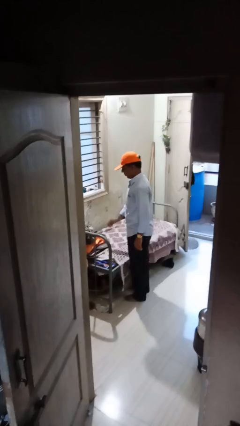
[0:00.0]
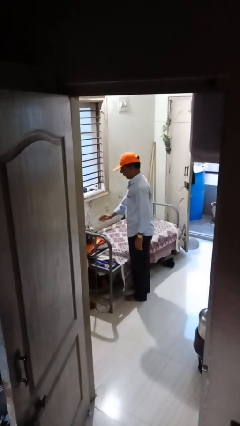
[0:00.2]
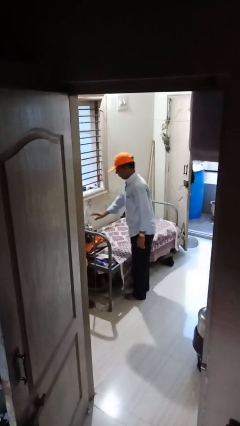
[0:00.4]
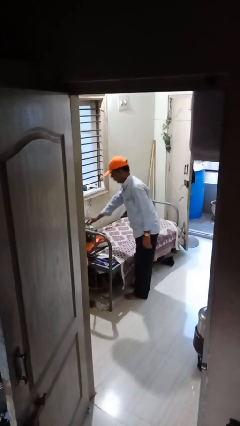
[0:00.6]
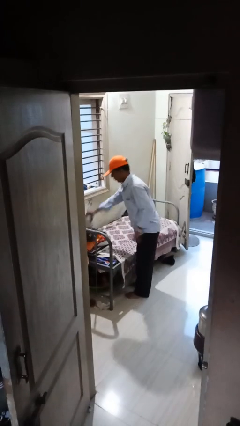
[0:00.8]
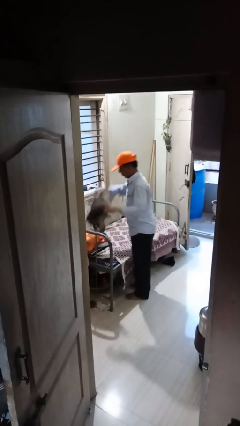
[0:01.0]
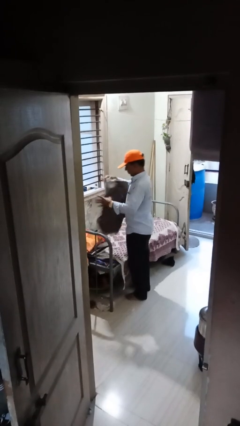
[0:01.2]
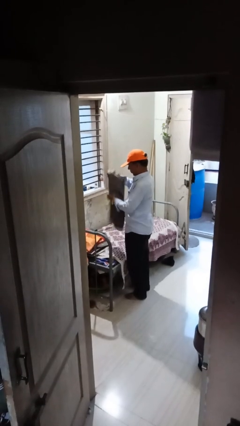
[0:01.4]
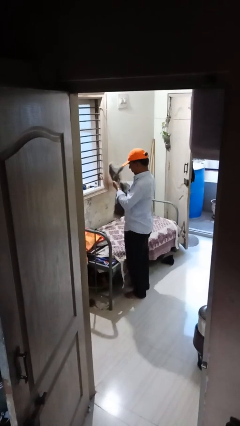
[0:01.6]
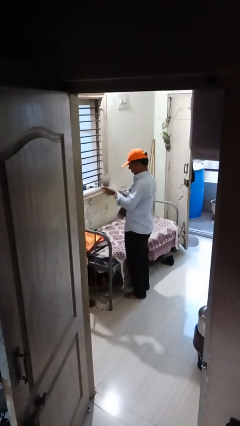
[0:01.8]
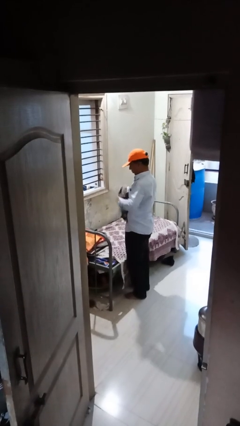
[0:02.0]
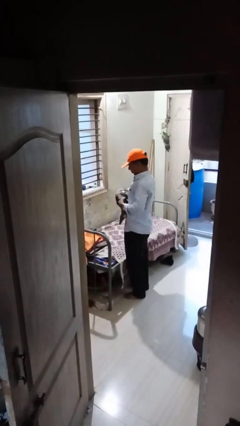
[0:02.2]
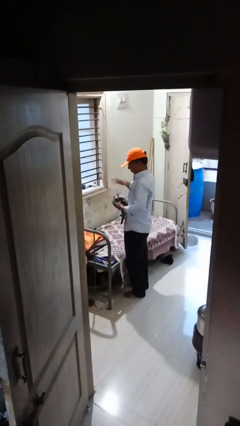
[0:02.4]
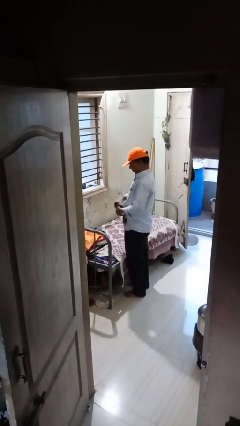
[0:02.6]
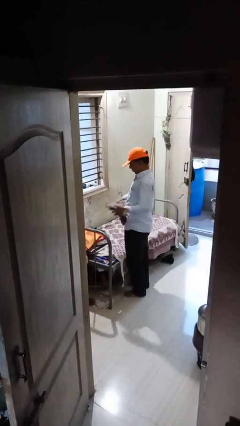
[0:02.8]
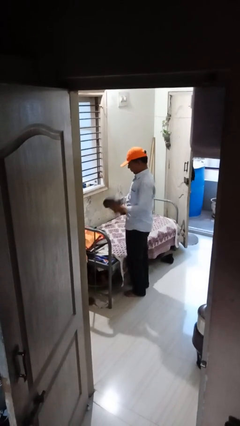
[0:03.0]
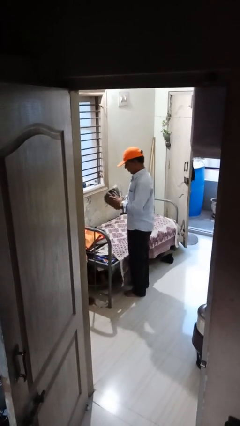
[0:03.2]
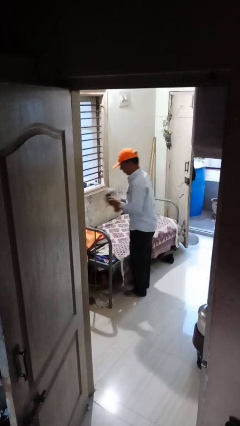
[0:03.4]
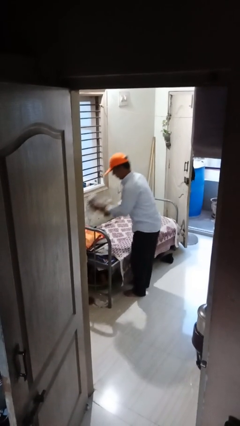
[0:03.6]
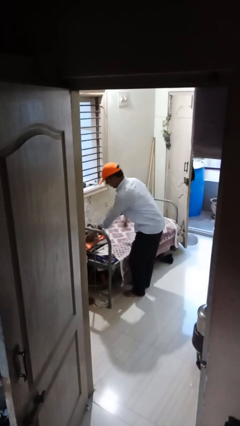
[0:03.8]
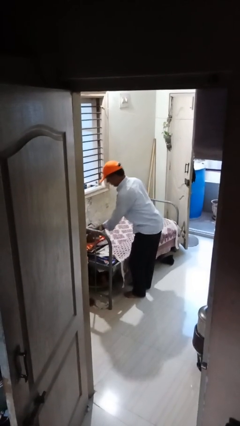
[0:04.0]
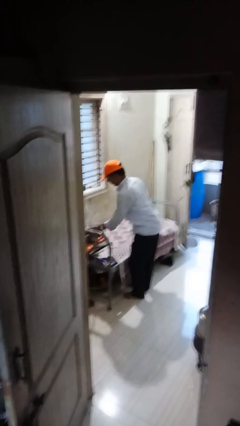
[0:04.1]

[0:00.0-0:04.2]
person folds pants

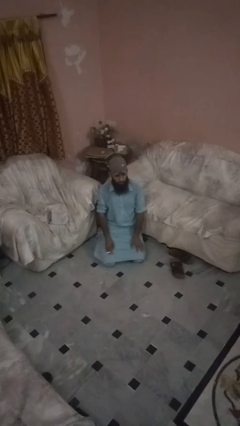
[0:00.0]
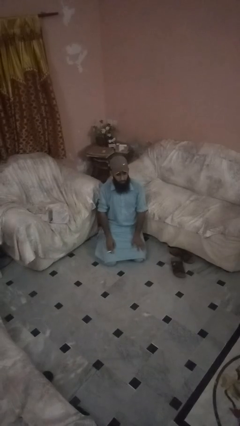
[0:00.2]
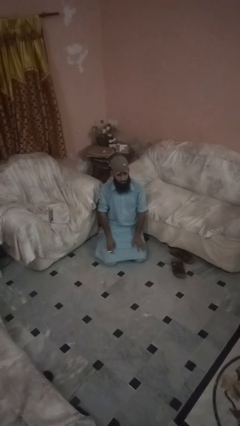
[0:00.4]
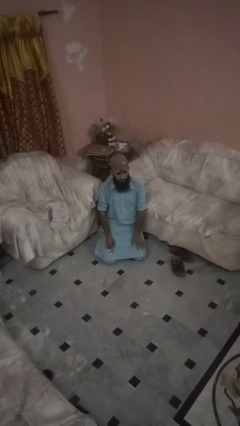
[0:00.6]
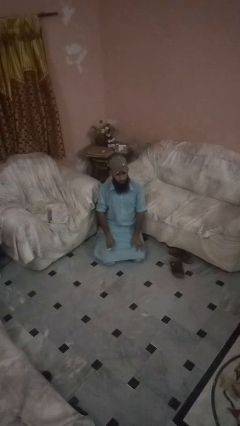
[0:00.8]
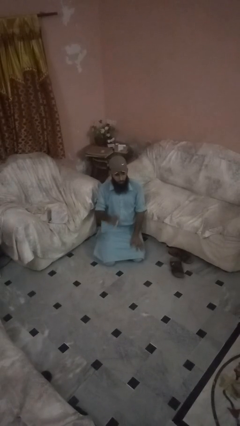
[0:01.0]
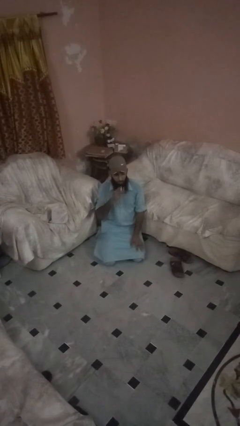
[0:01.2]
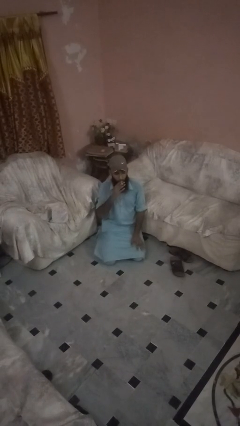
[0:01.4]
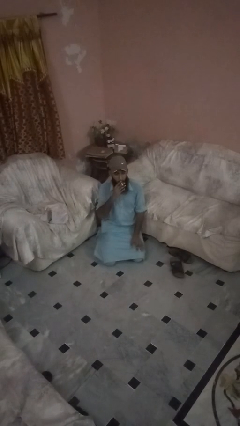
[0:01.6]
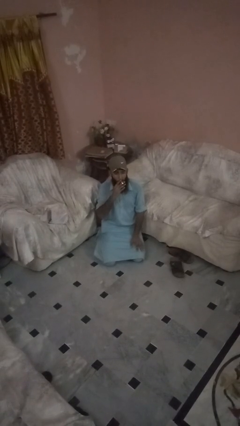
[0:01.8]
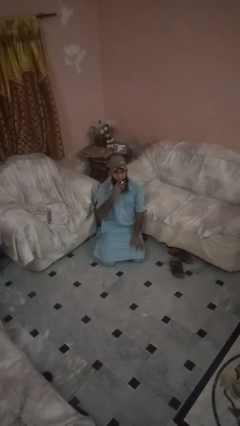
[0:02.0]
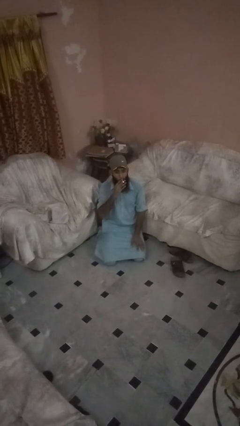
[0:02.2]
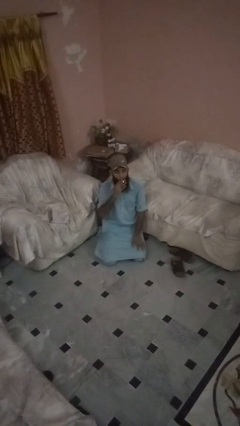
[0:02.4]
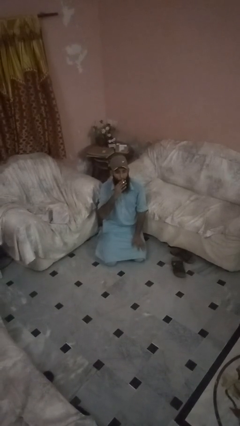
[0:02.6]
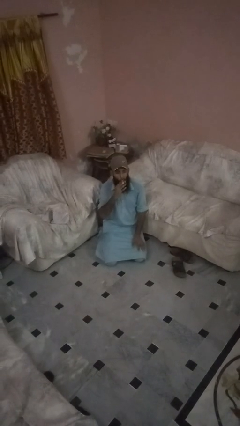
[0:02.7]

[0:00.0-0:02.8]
person vapes

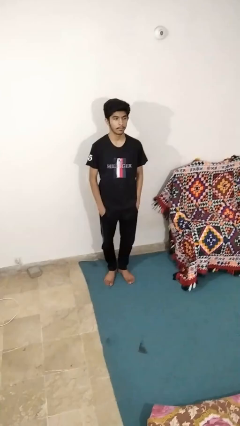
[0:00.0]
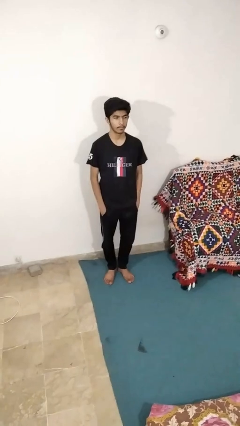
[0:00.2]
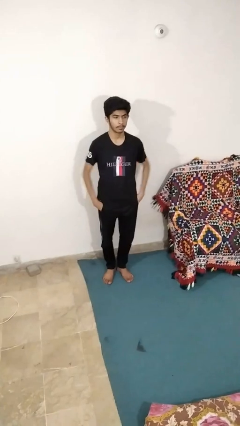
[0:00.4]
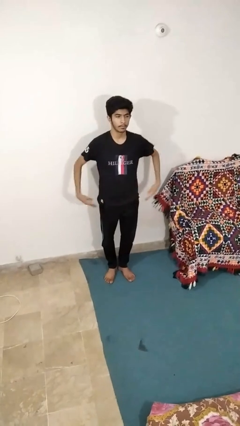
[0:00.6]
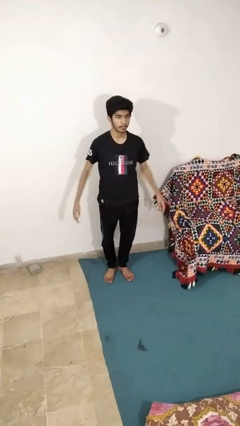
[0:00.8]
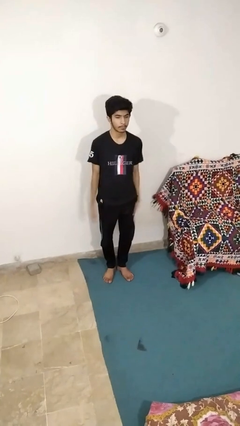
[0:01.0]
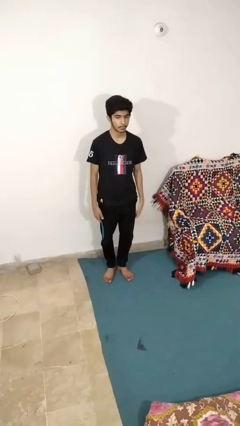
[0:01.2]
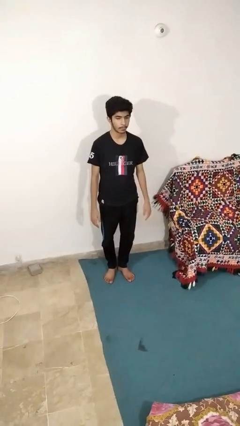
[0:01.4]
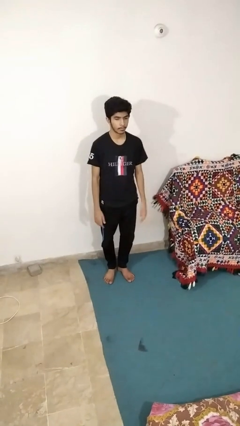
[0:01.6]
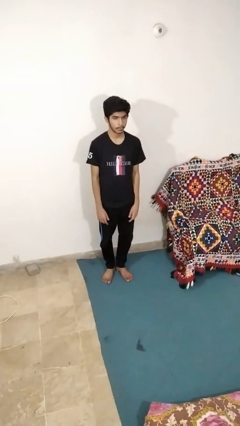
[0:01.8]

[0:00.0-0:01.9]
person puts hands in back pockets

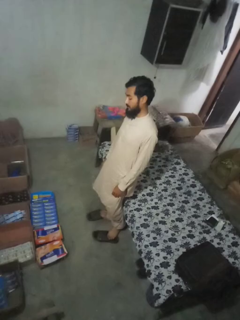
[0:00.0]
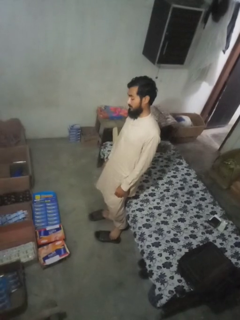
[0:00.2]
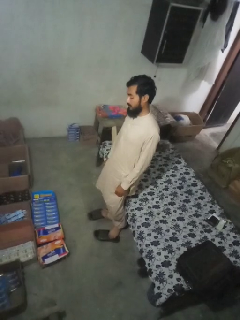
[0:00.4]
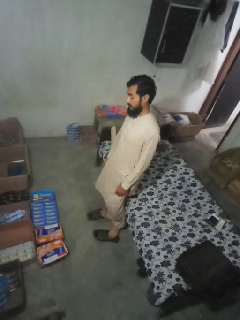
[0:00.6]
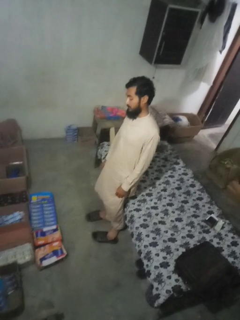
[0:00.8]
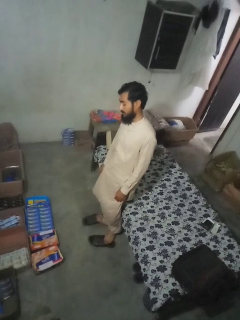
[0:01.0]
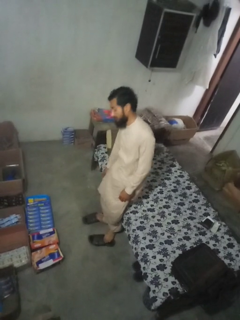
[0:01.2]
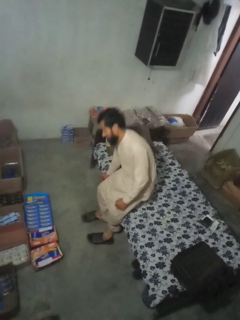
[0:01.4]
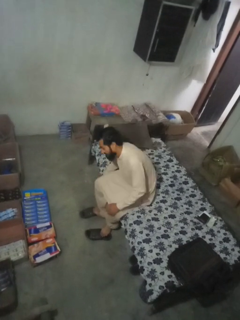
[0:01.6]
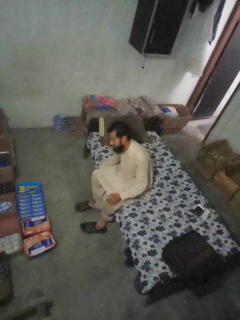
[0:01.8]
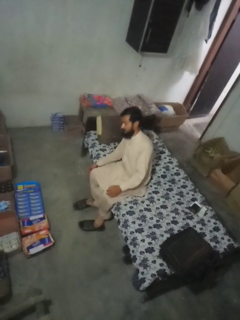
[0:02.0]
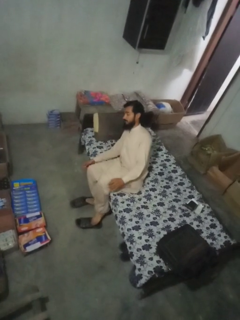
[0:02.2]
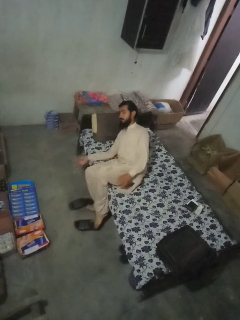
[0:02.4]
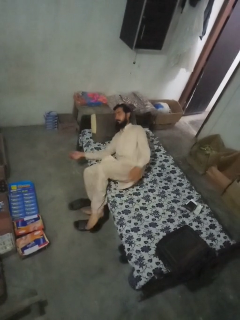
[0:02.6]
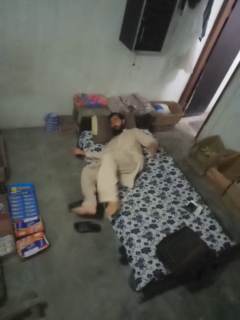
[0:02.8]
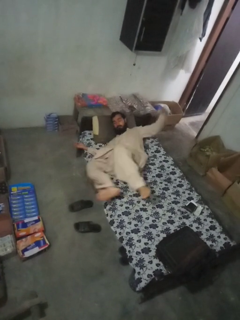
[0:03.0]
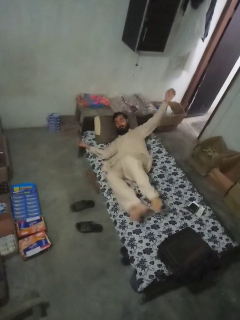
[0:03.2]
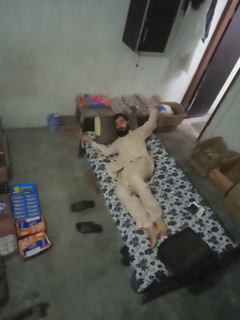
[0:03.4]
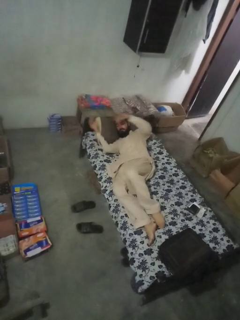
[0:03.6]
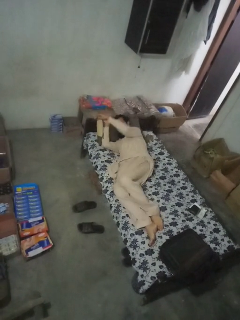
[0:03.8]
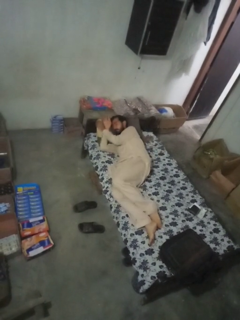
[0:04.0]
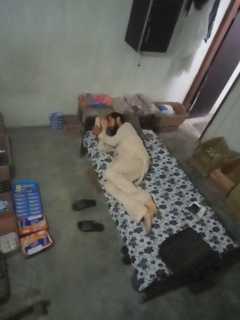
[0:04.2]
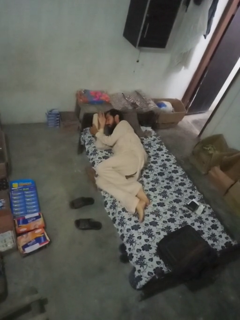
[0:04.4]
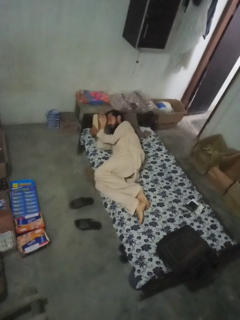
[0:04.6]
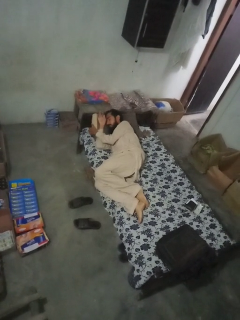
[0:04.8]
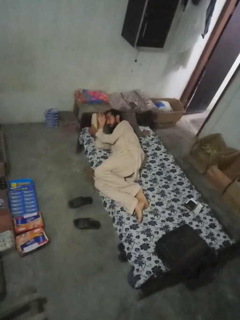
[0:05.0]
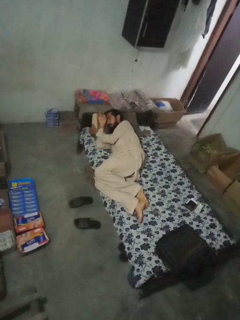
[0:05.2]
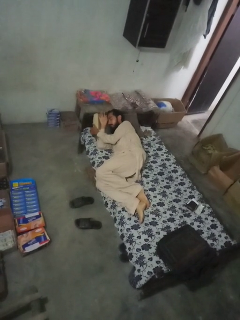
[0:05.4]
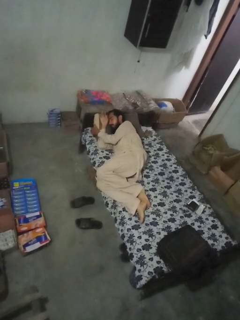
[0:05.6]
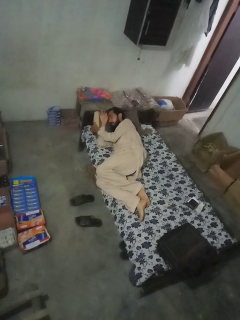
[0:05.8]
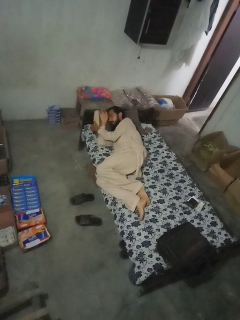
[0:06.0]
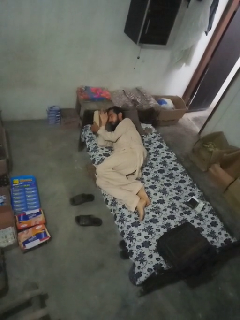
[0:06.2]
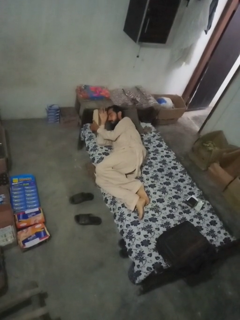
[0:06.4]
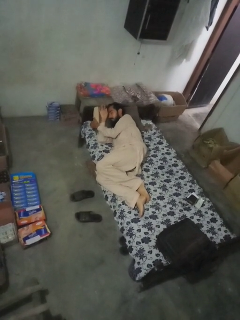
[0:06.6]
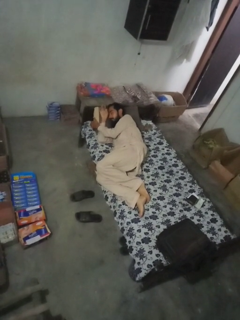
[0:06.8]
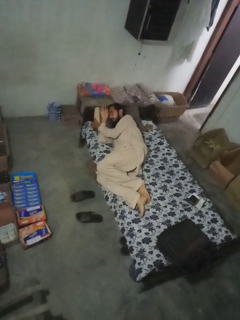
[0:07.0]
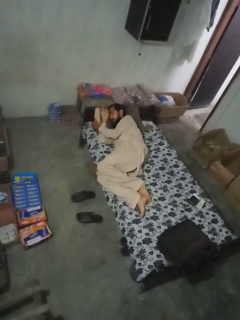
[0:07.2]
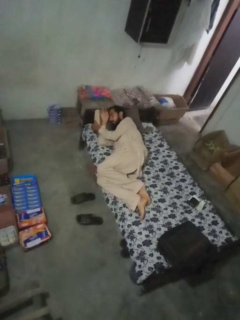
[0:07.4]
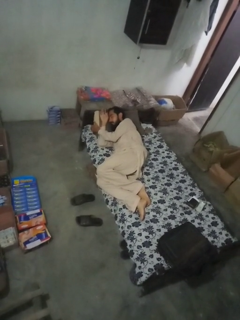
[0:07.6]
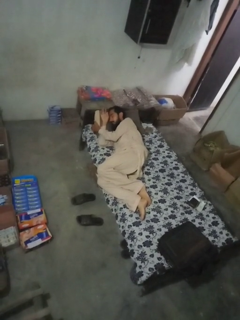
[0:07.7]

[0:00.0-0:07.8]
person lies down on bed

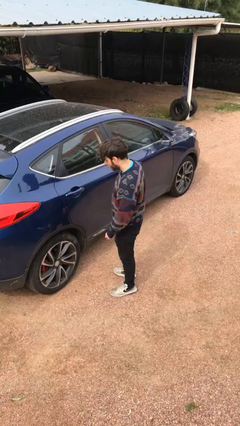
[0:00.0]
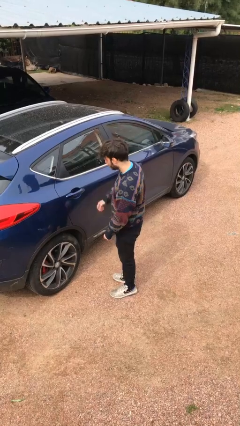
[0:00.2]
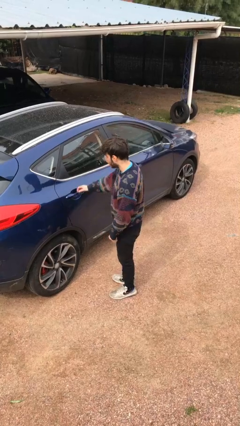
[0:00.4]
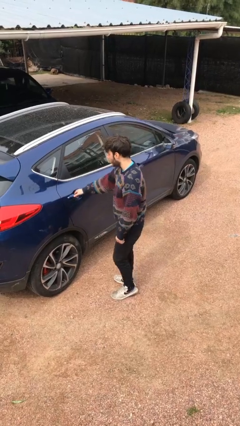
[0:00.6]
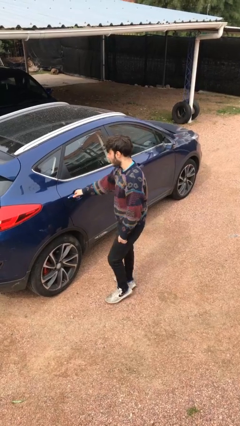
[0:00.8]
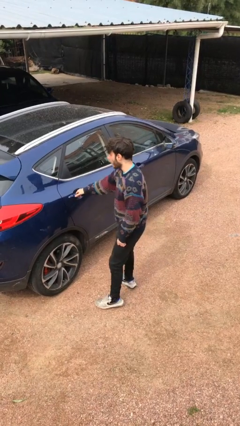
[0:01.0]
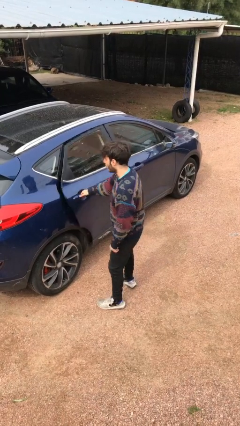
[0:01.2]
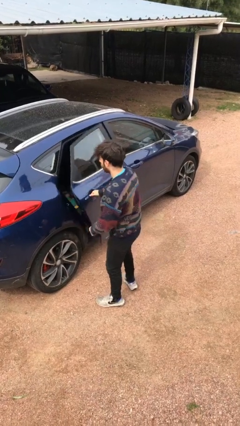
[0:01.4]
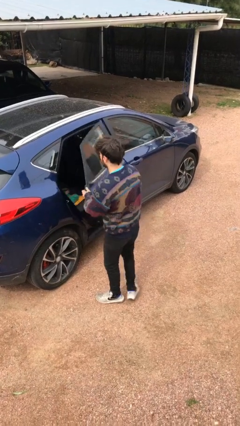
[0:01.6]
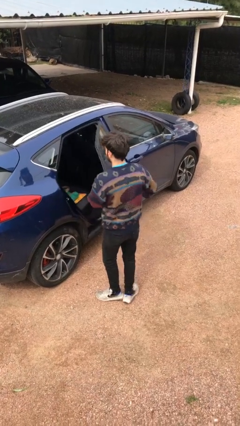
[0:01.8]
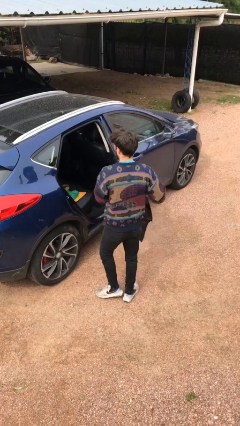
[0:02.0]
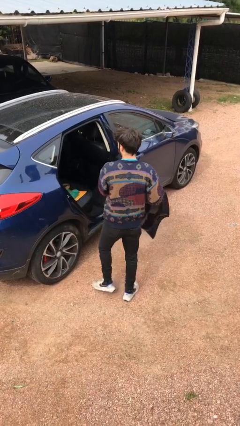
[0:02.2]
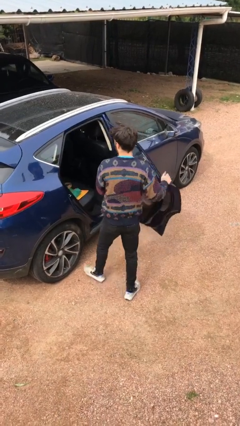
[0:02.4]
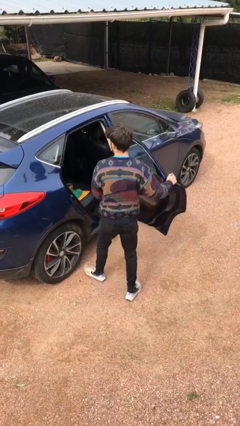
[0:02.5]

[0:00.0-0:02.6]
person opens car door
